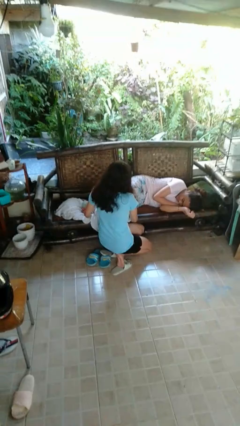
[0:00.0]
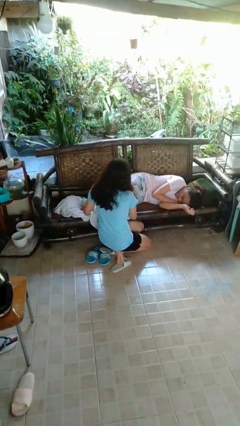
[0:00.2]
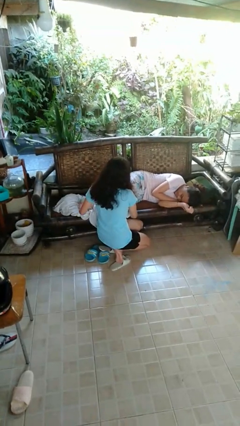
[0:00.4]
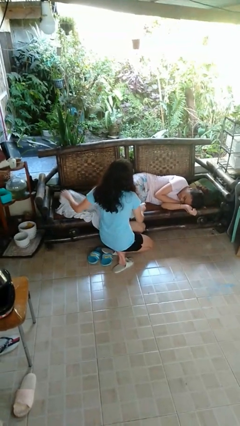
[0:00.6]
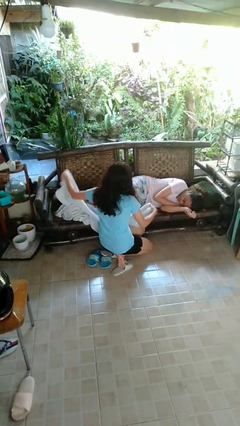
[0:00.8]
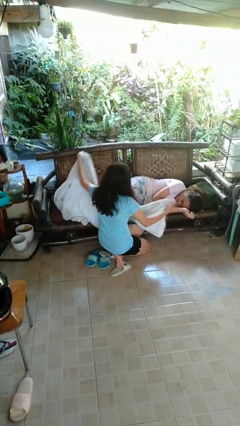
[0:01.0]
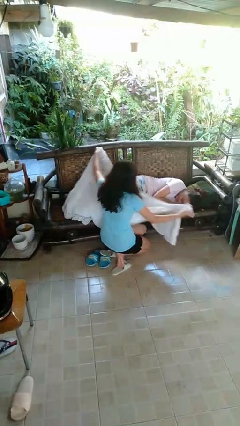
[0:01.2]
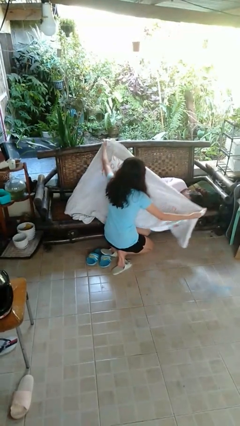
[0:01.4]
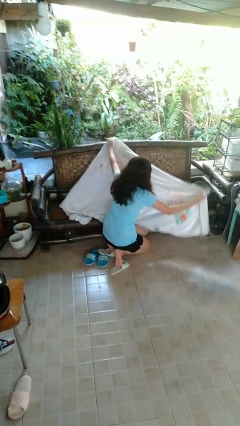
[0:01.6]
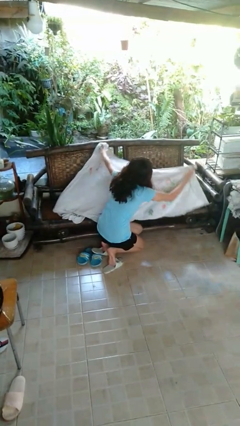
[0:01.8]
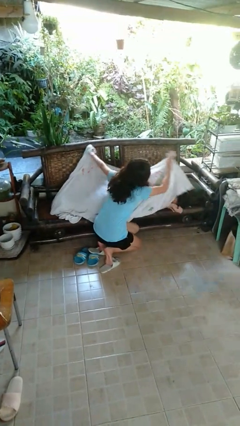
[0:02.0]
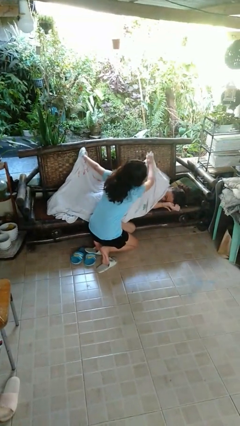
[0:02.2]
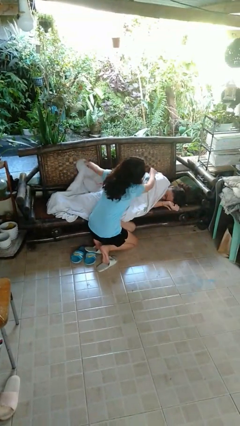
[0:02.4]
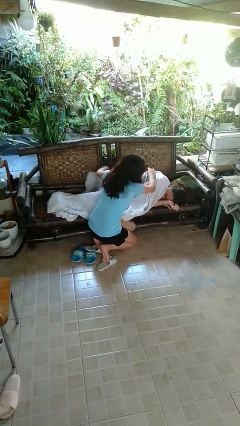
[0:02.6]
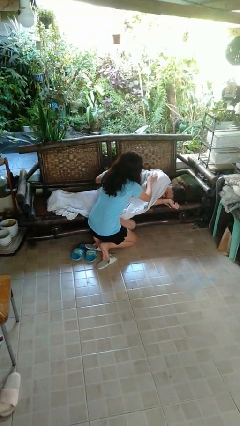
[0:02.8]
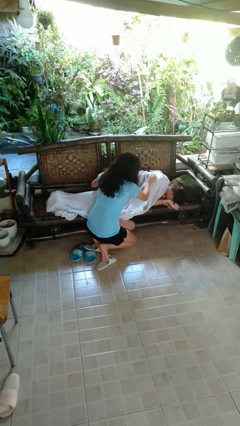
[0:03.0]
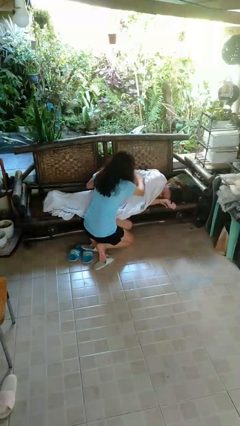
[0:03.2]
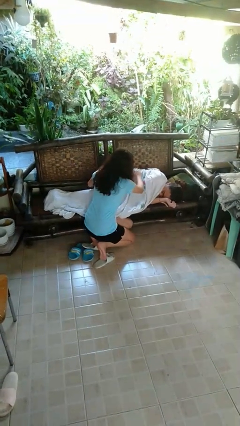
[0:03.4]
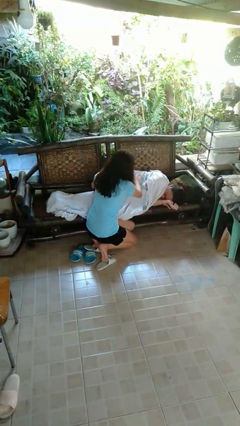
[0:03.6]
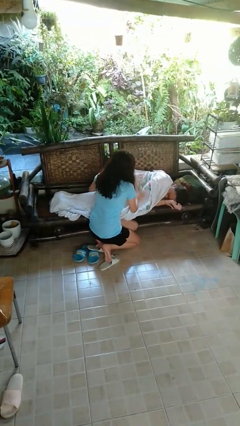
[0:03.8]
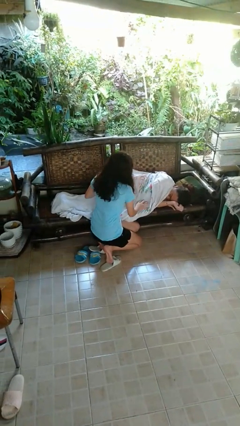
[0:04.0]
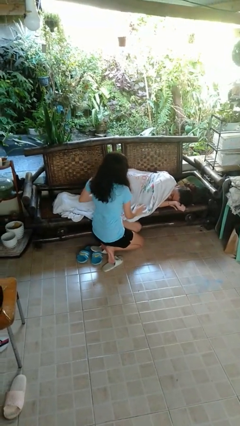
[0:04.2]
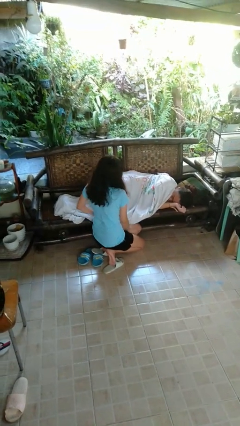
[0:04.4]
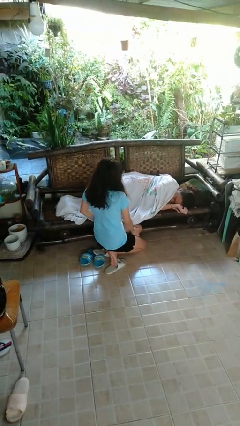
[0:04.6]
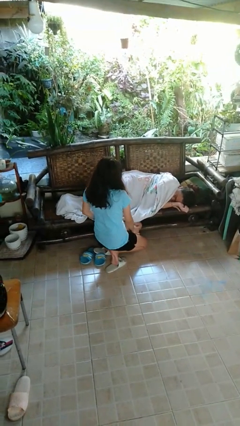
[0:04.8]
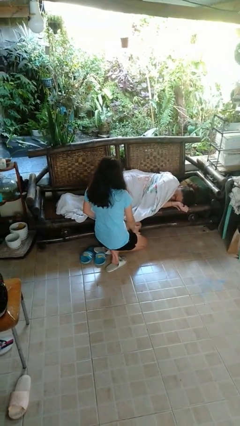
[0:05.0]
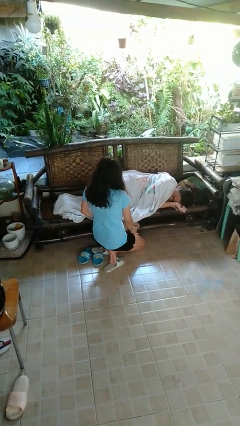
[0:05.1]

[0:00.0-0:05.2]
person covers friend with blanket

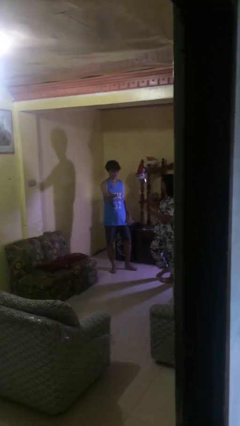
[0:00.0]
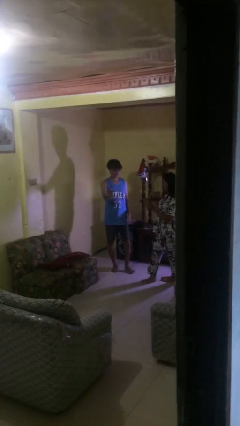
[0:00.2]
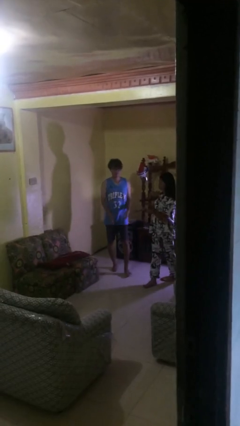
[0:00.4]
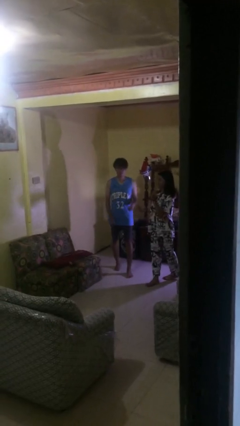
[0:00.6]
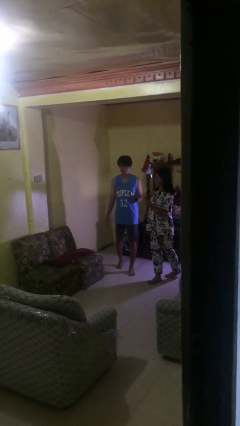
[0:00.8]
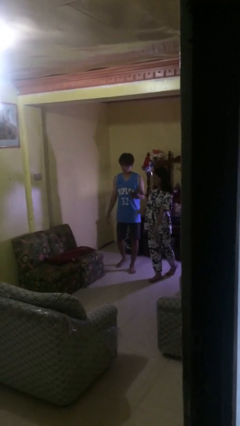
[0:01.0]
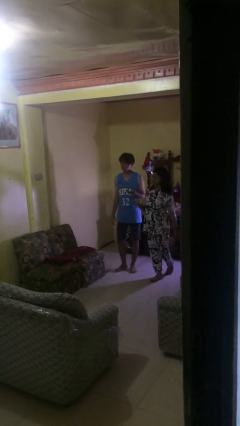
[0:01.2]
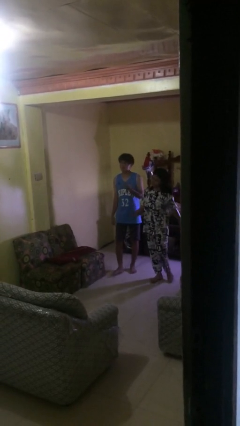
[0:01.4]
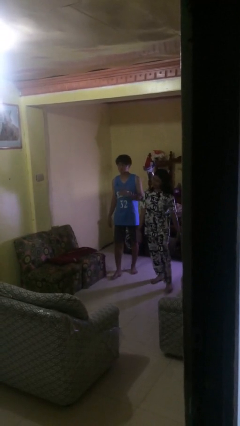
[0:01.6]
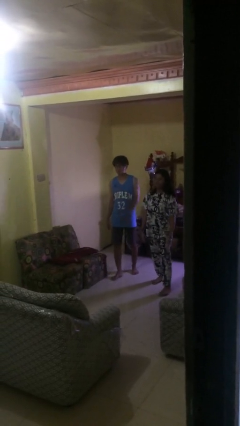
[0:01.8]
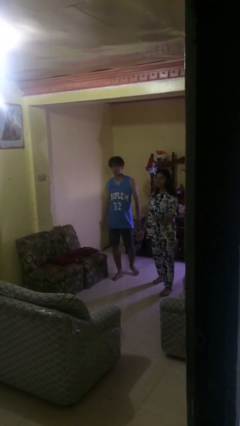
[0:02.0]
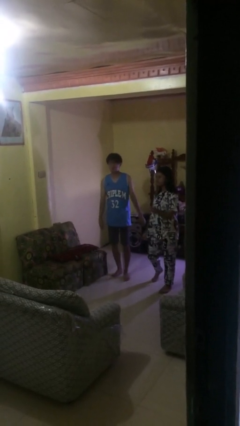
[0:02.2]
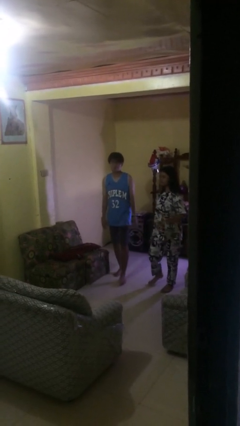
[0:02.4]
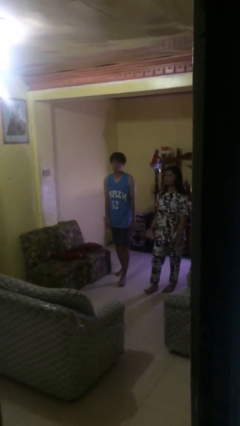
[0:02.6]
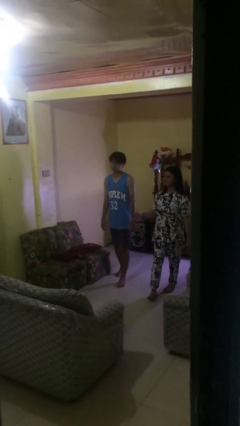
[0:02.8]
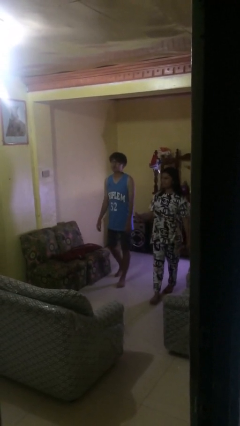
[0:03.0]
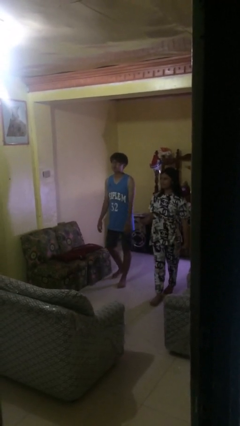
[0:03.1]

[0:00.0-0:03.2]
person talks to person

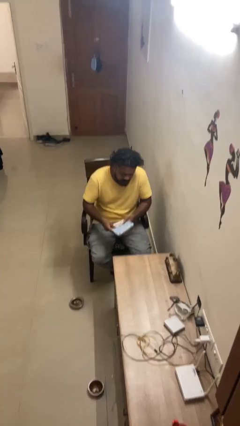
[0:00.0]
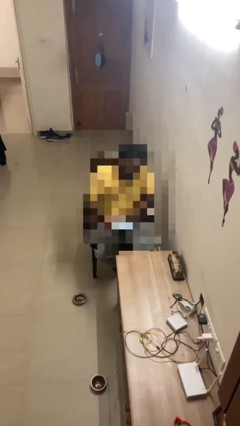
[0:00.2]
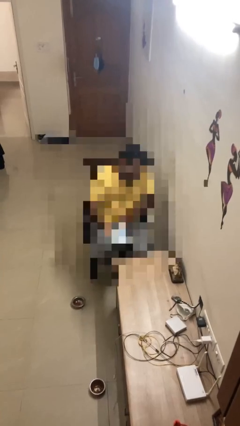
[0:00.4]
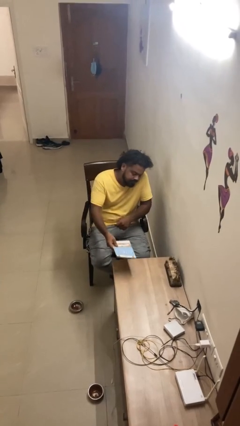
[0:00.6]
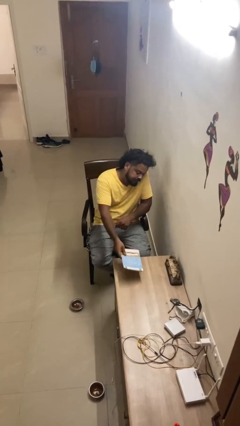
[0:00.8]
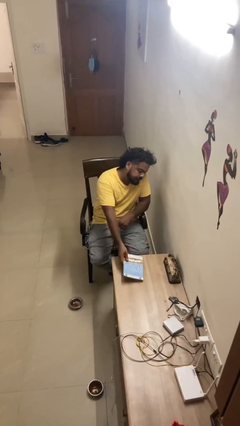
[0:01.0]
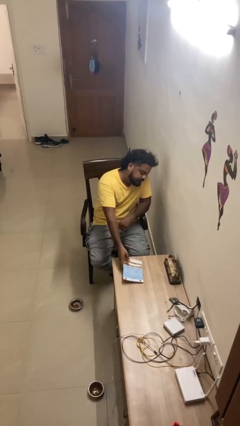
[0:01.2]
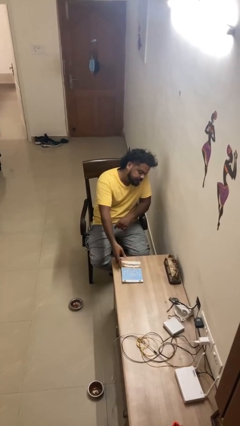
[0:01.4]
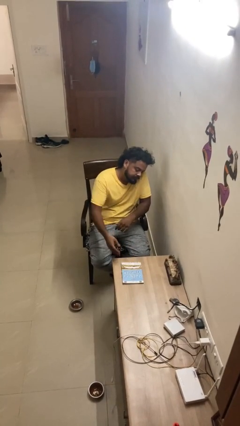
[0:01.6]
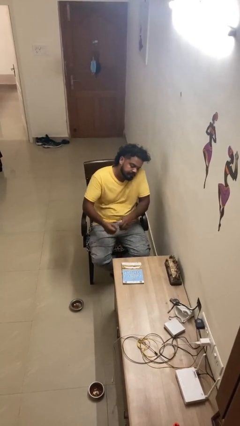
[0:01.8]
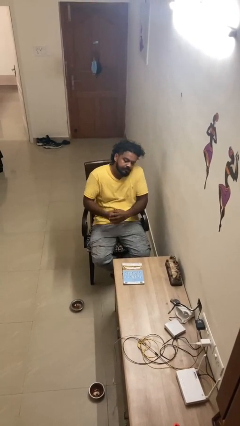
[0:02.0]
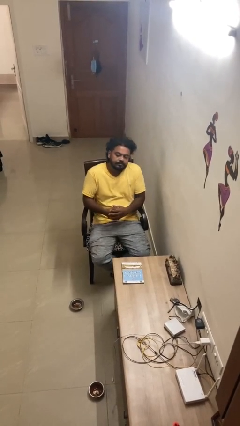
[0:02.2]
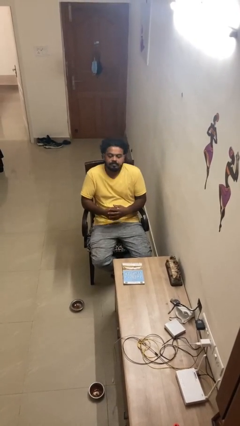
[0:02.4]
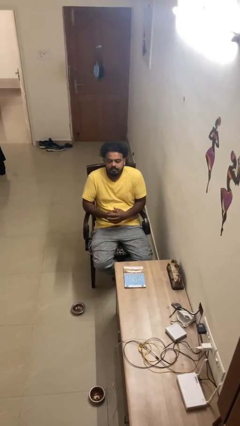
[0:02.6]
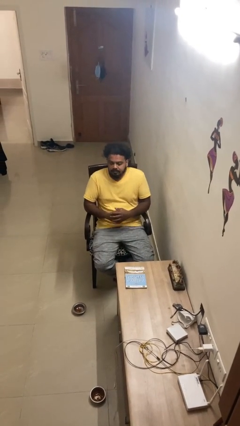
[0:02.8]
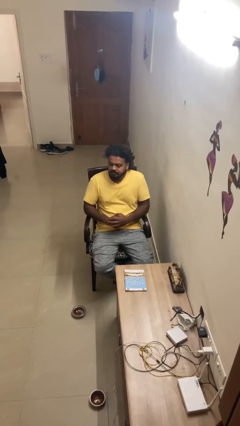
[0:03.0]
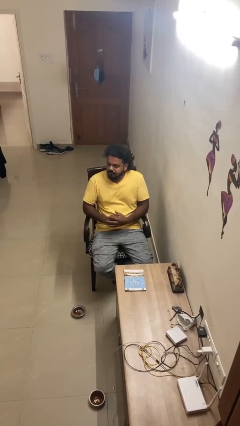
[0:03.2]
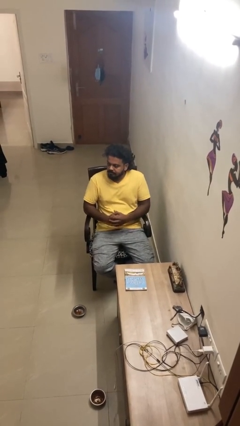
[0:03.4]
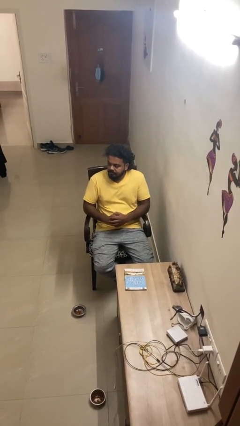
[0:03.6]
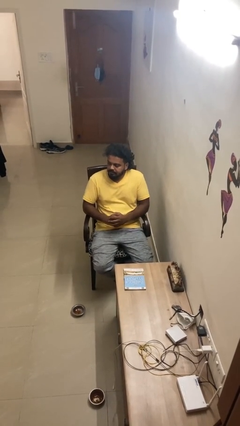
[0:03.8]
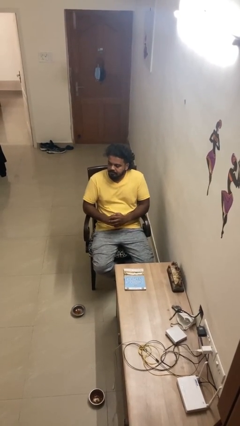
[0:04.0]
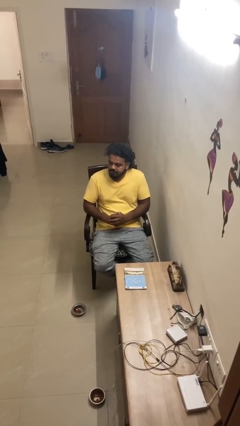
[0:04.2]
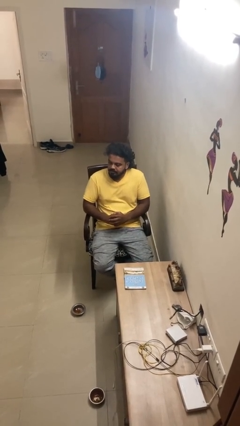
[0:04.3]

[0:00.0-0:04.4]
person puts down object on table

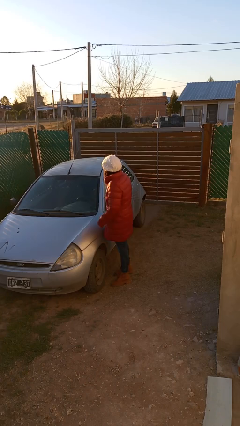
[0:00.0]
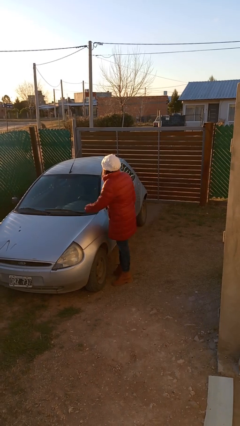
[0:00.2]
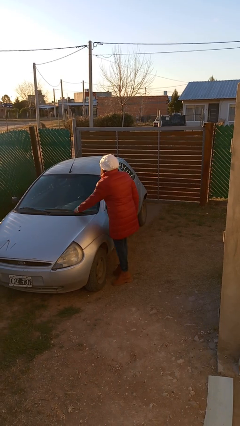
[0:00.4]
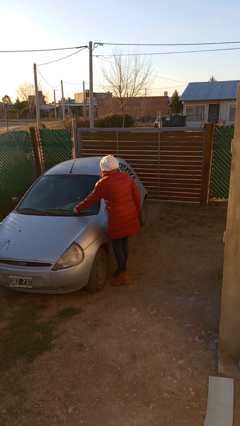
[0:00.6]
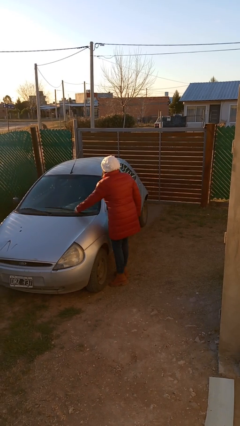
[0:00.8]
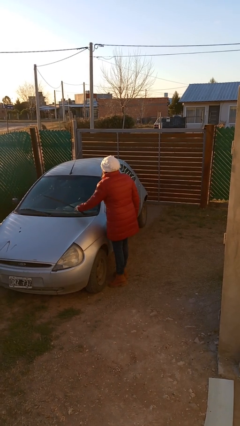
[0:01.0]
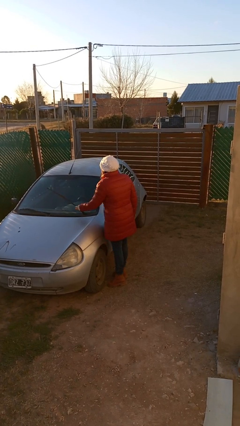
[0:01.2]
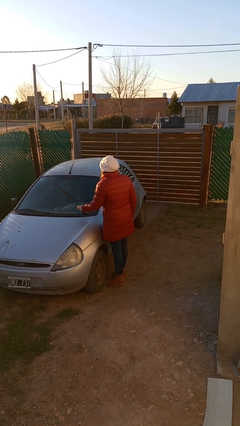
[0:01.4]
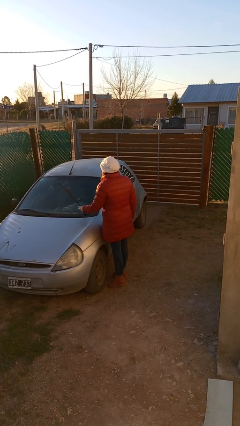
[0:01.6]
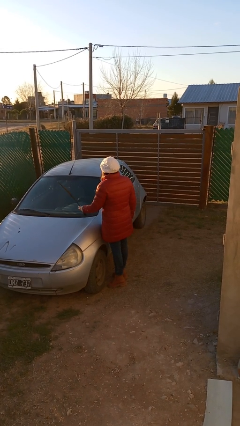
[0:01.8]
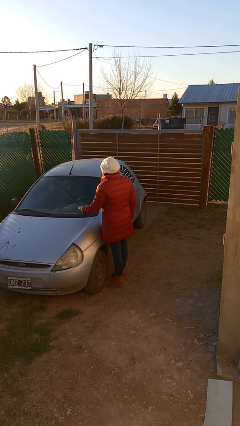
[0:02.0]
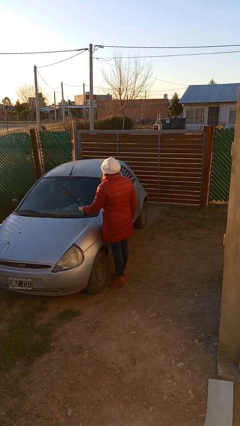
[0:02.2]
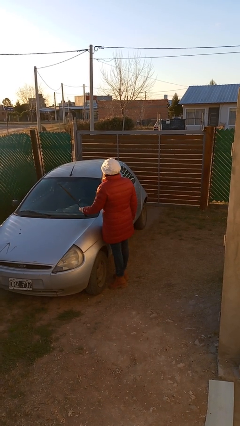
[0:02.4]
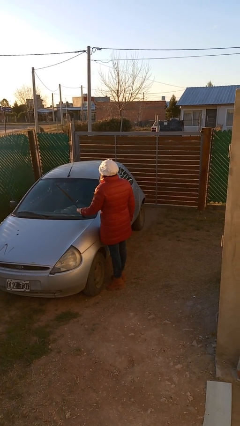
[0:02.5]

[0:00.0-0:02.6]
person flips up car wipers

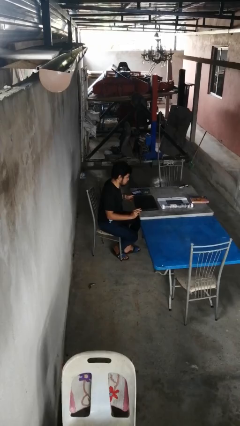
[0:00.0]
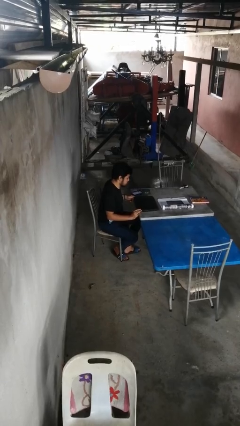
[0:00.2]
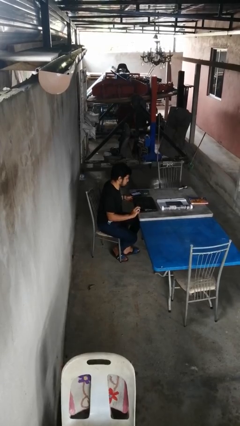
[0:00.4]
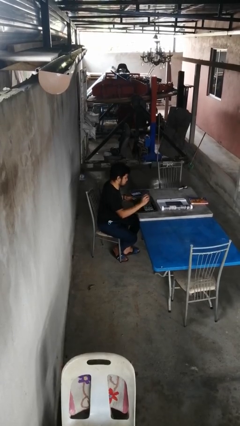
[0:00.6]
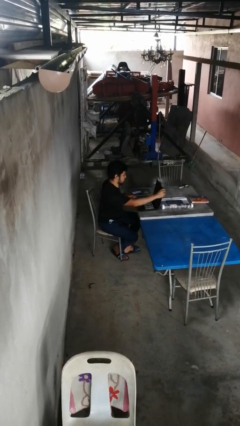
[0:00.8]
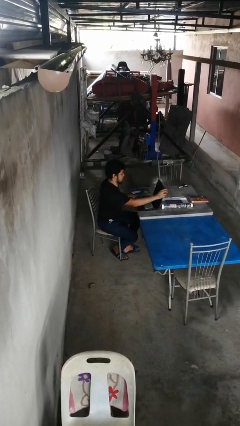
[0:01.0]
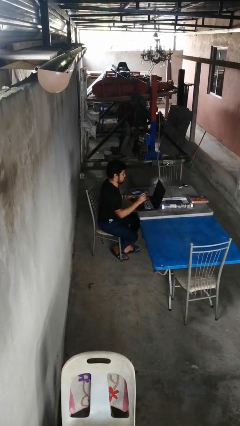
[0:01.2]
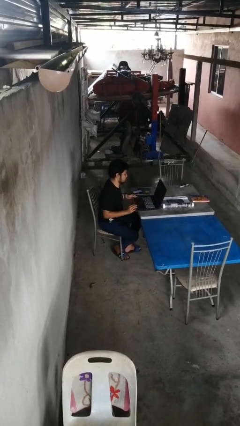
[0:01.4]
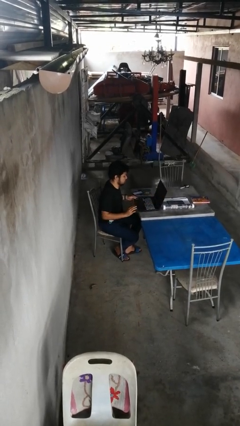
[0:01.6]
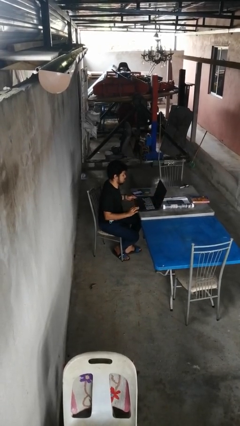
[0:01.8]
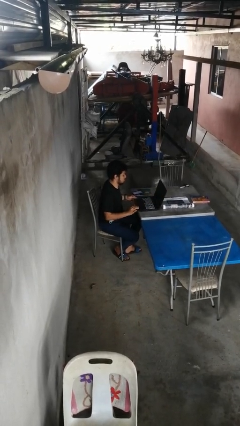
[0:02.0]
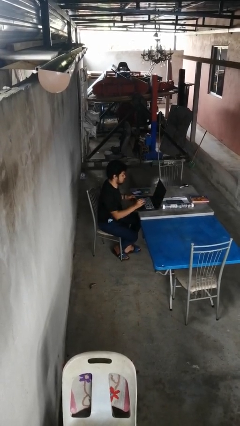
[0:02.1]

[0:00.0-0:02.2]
person opens laptop
